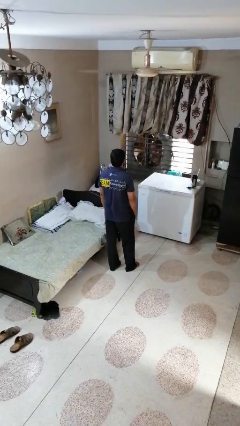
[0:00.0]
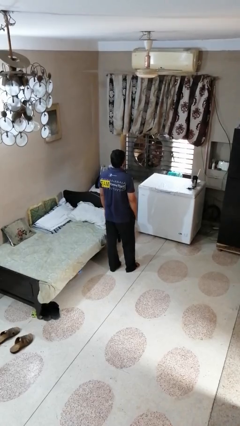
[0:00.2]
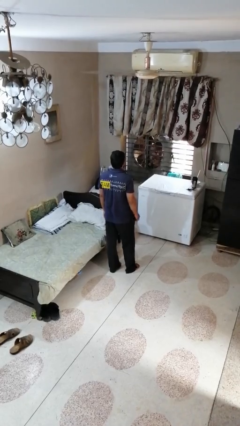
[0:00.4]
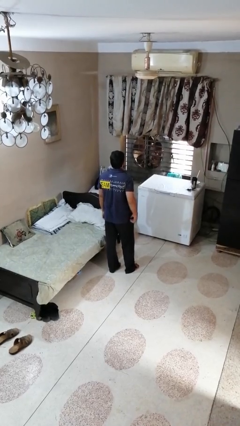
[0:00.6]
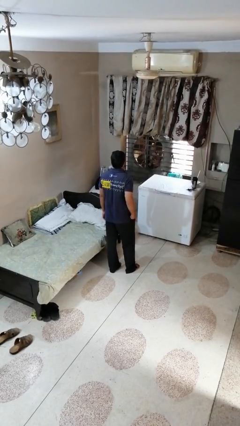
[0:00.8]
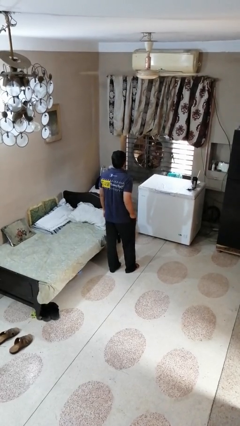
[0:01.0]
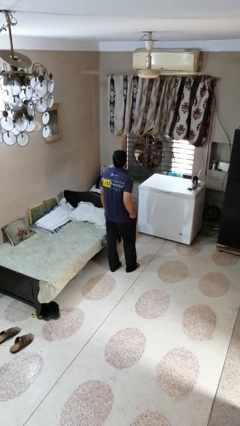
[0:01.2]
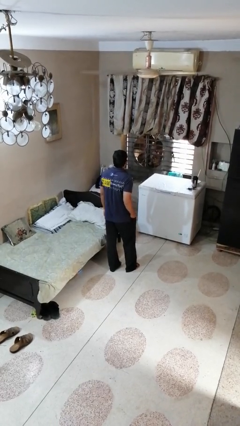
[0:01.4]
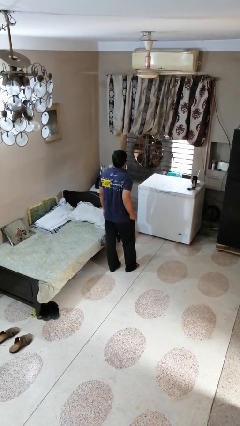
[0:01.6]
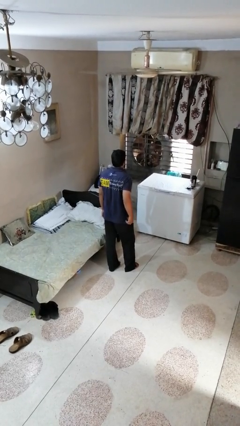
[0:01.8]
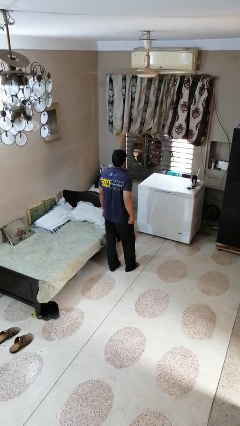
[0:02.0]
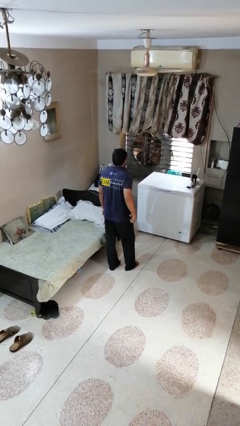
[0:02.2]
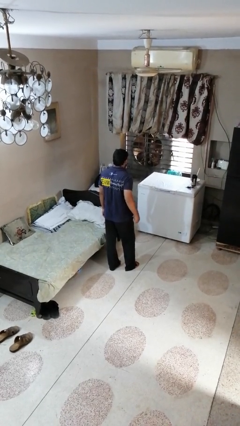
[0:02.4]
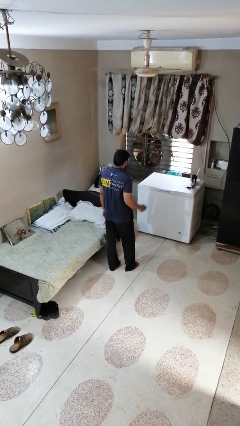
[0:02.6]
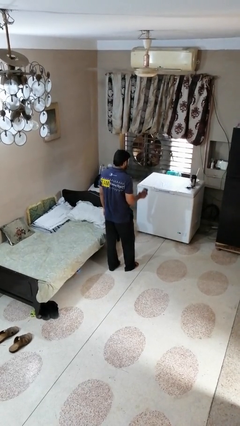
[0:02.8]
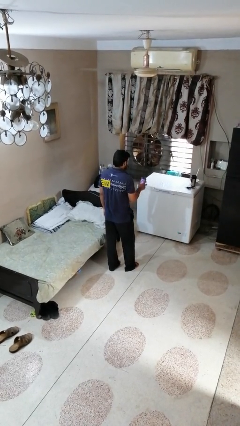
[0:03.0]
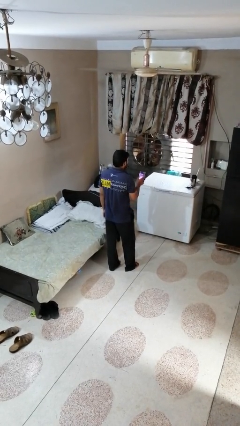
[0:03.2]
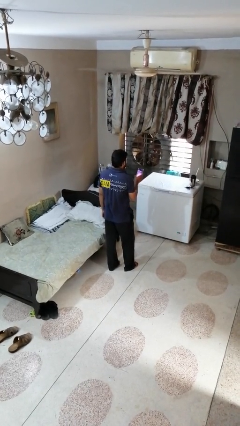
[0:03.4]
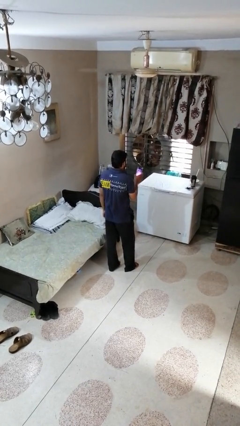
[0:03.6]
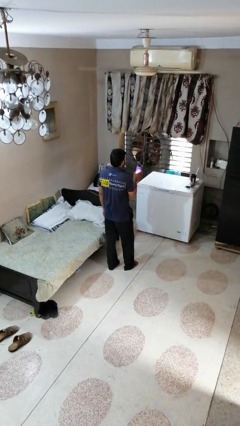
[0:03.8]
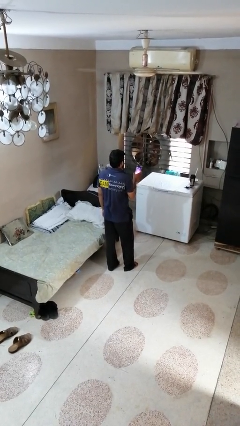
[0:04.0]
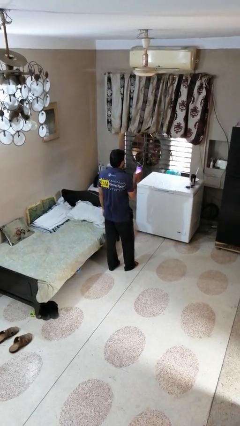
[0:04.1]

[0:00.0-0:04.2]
person takes phone from pocket

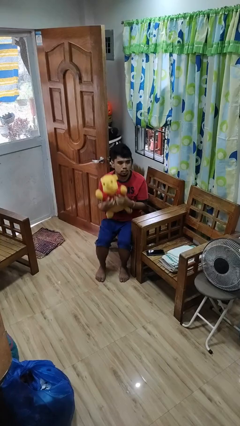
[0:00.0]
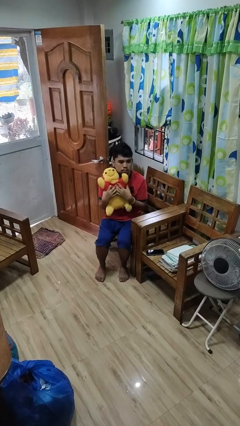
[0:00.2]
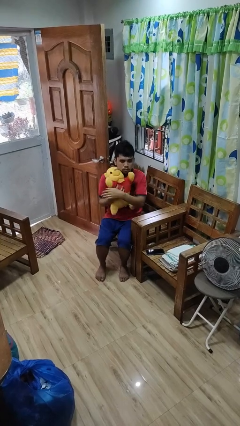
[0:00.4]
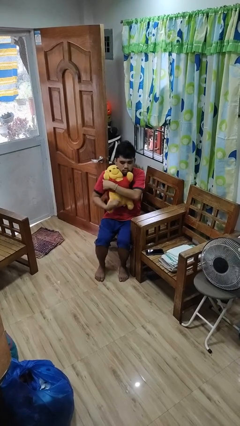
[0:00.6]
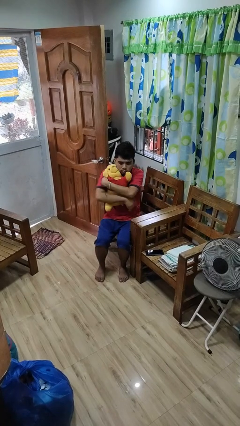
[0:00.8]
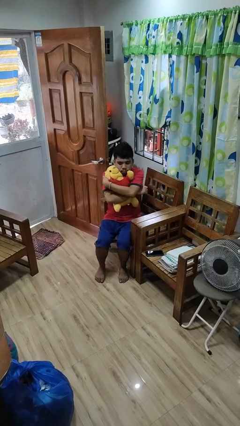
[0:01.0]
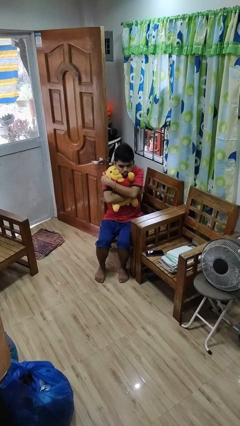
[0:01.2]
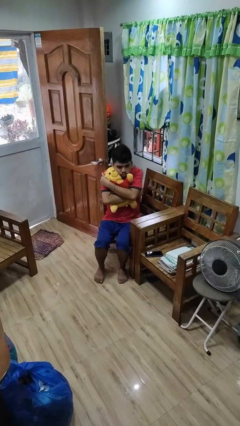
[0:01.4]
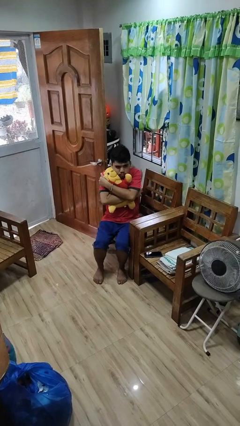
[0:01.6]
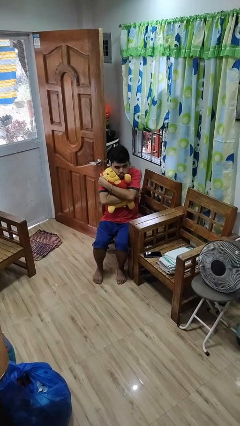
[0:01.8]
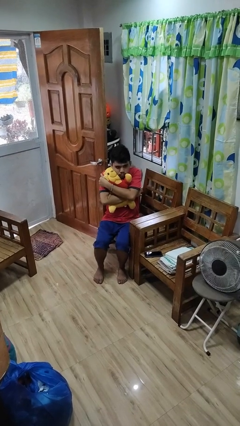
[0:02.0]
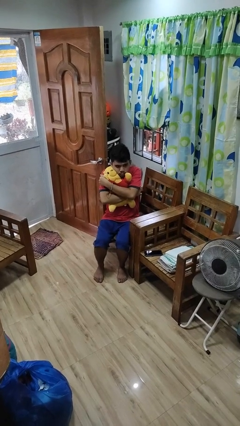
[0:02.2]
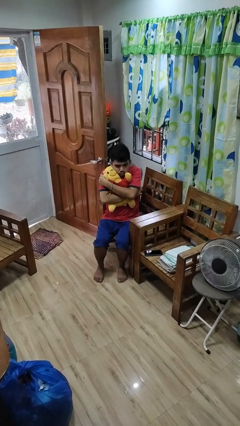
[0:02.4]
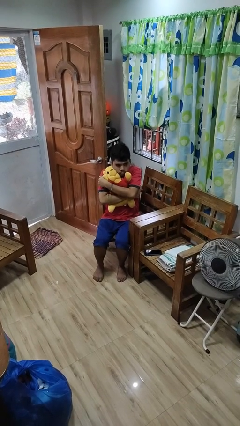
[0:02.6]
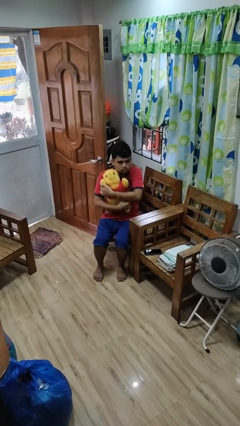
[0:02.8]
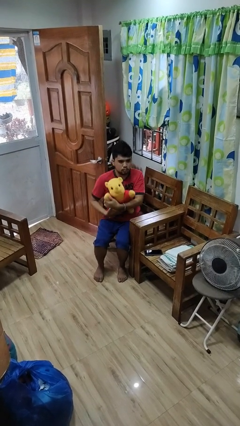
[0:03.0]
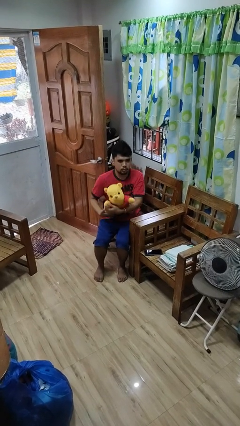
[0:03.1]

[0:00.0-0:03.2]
person hugs stuffed animal

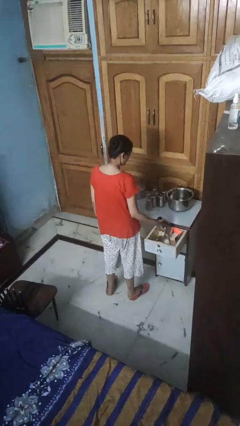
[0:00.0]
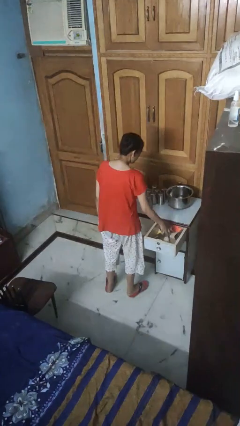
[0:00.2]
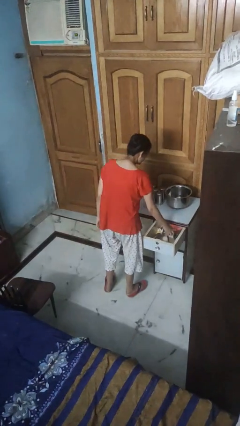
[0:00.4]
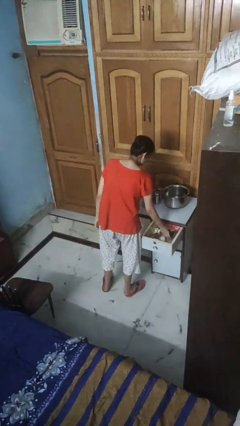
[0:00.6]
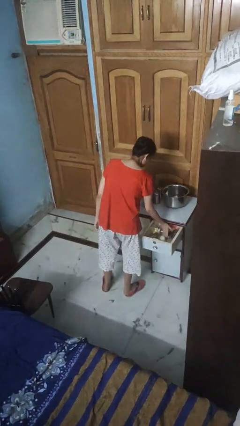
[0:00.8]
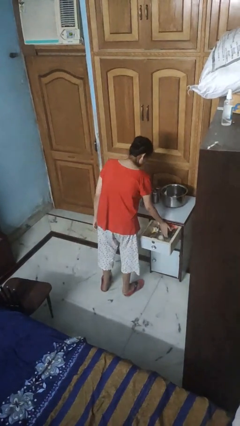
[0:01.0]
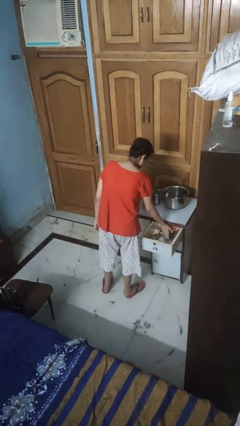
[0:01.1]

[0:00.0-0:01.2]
person puts object into kitchen drawer

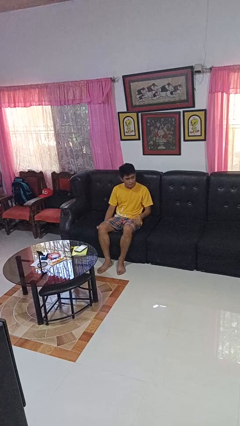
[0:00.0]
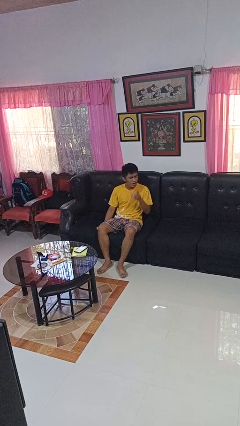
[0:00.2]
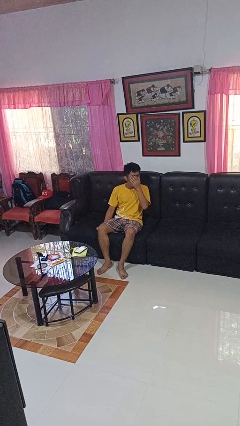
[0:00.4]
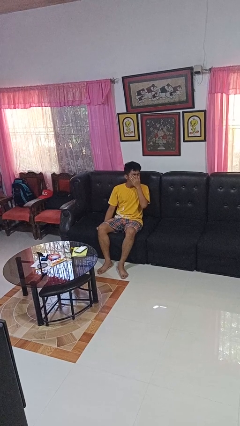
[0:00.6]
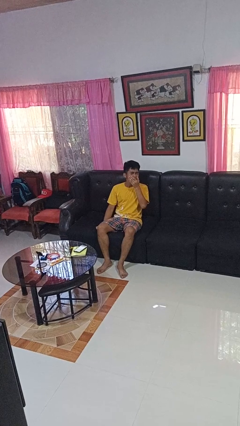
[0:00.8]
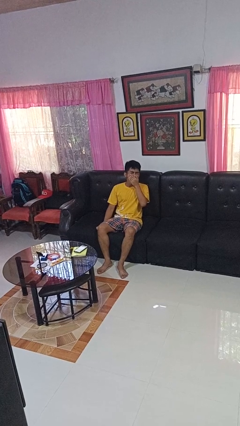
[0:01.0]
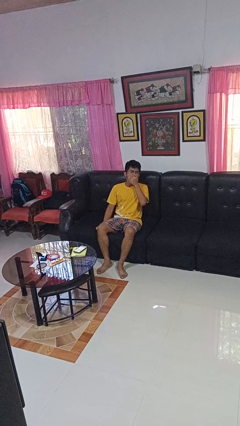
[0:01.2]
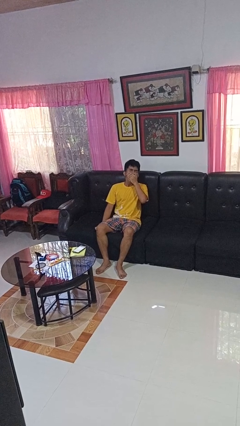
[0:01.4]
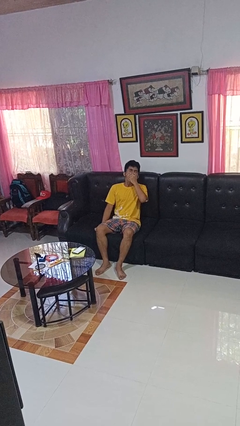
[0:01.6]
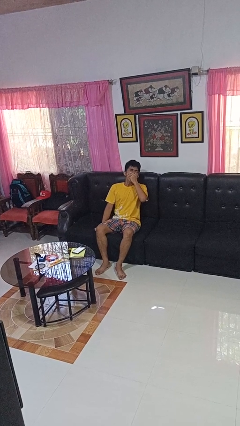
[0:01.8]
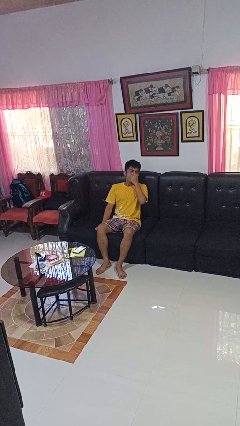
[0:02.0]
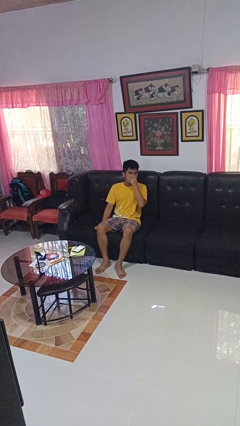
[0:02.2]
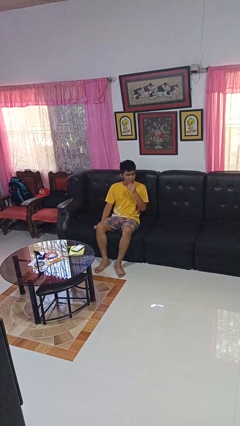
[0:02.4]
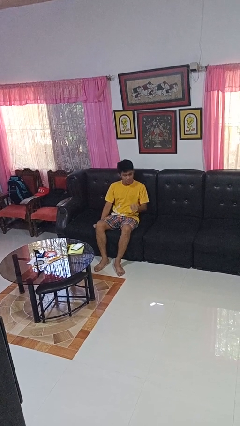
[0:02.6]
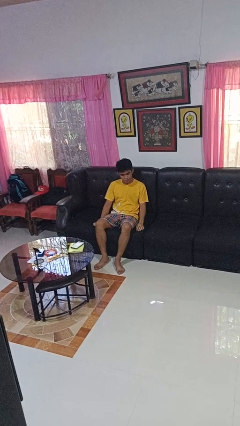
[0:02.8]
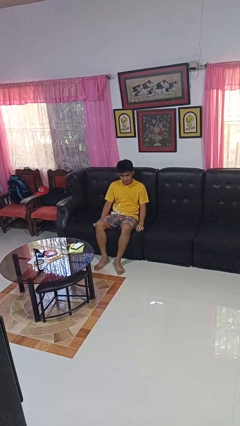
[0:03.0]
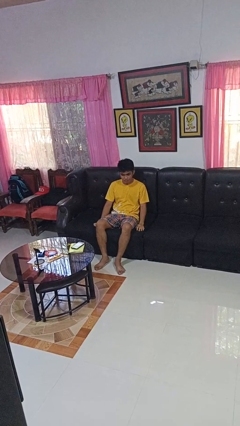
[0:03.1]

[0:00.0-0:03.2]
person yawns

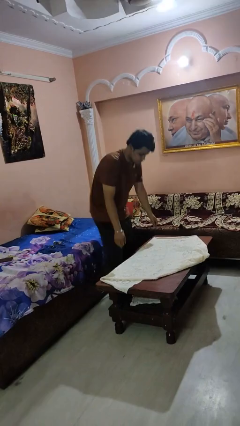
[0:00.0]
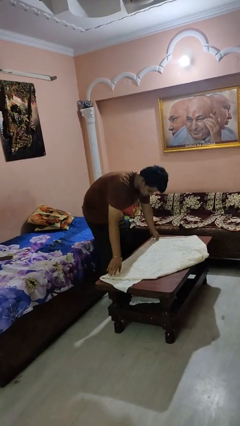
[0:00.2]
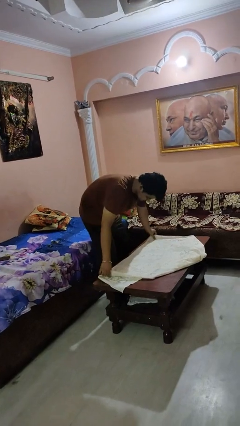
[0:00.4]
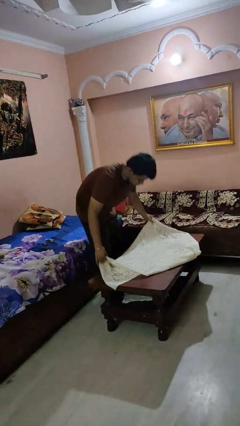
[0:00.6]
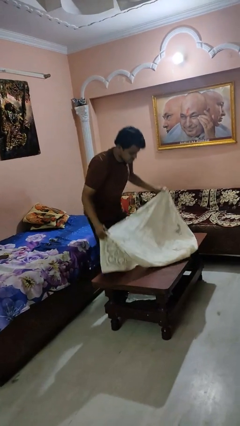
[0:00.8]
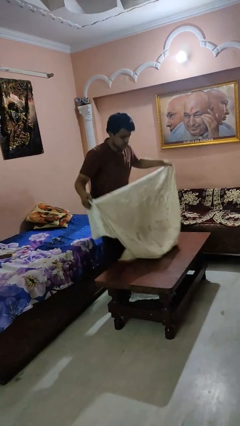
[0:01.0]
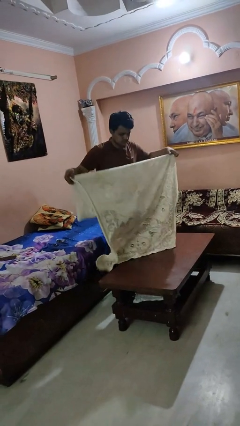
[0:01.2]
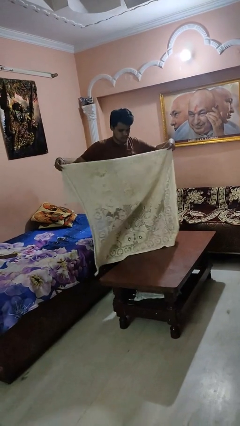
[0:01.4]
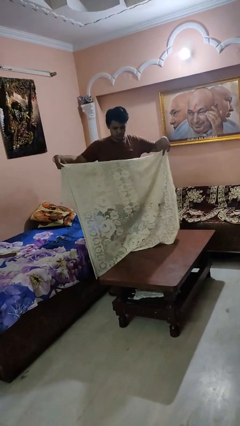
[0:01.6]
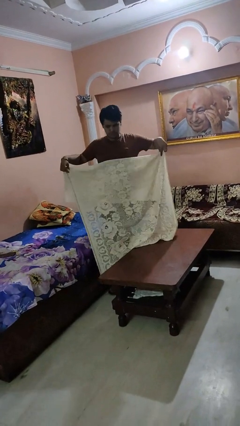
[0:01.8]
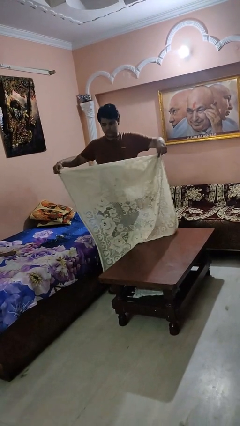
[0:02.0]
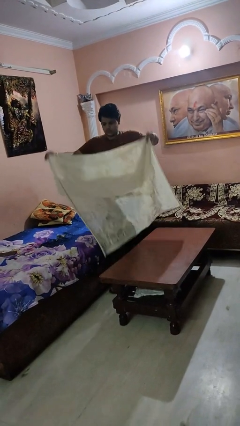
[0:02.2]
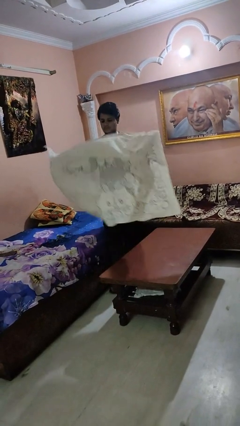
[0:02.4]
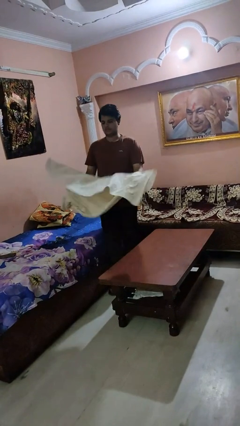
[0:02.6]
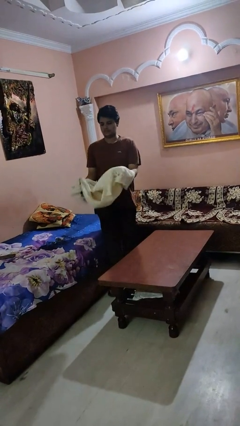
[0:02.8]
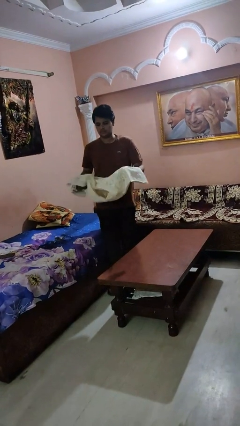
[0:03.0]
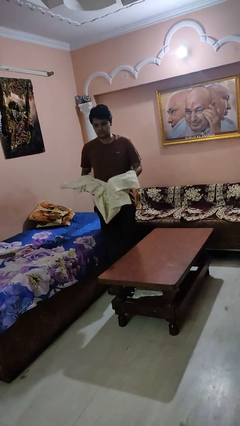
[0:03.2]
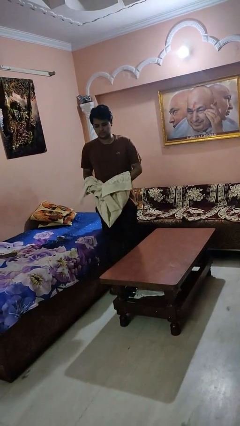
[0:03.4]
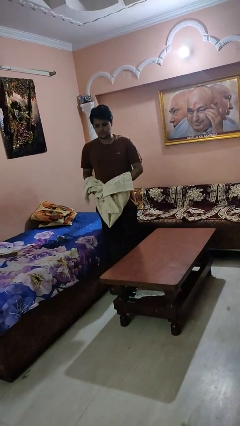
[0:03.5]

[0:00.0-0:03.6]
person folds tablecloth

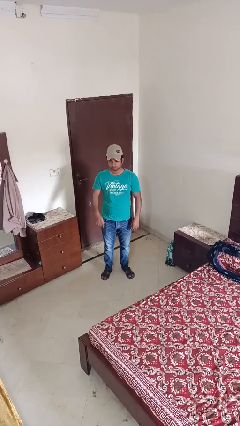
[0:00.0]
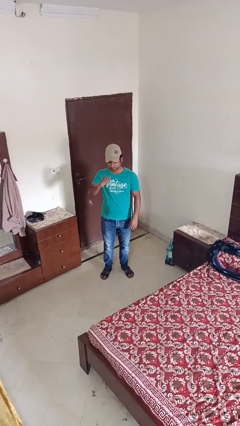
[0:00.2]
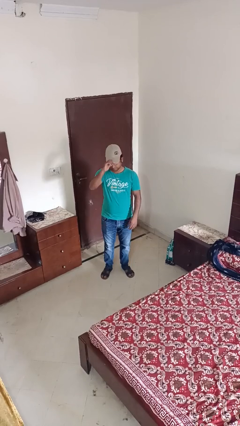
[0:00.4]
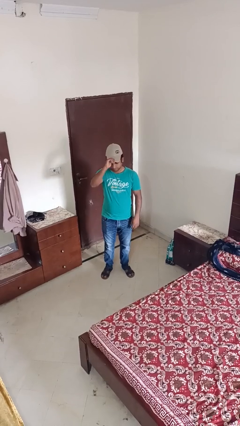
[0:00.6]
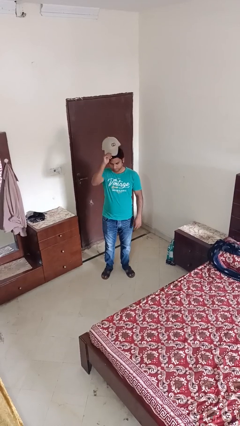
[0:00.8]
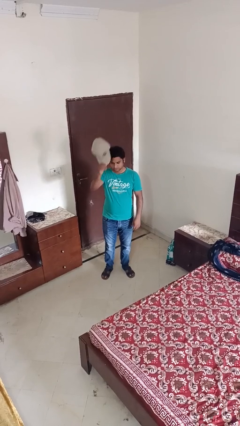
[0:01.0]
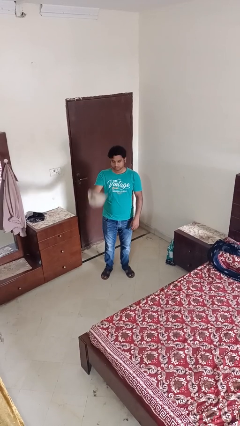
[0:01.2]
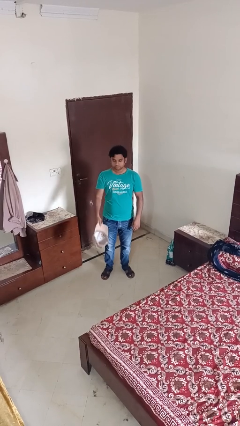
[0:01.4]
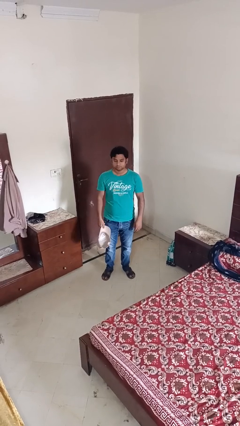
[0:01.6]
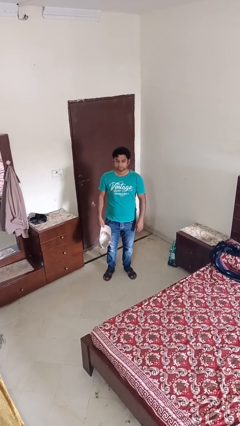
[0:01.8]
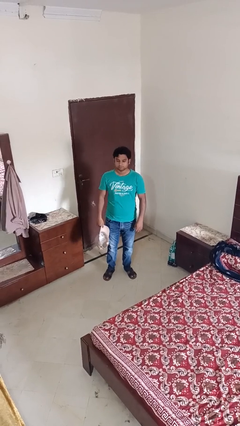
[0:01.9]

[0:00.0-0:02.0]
person takes off hat

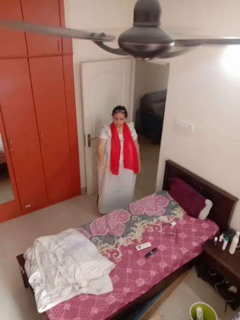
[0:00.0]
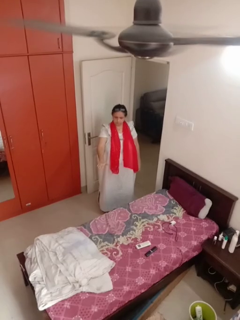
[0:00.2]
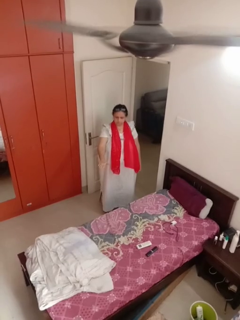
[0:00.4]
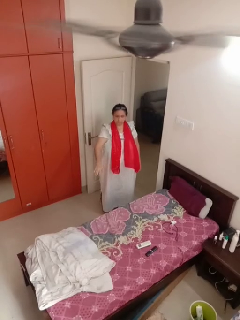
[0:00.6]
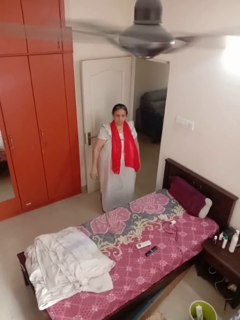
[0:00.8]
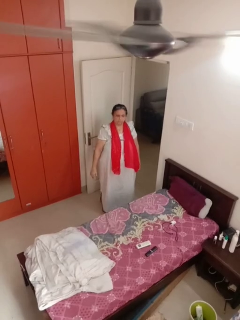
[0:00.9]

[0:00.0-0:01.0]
person gestures swipe down
